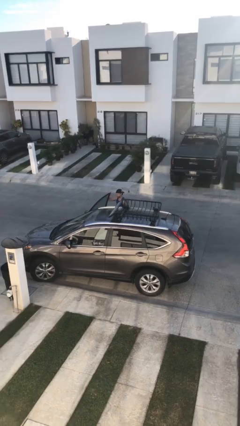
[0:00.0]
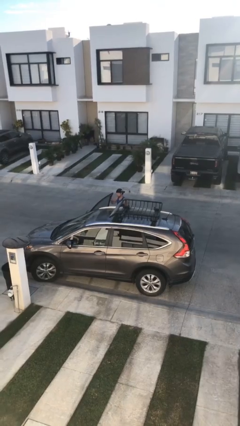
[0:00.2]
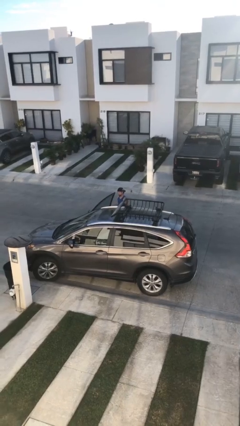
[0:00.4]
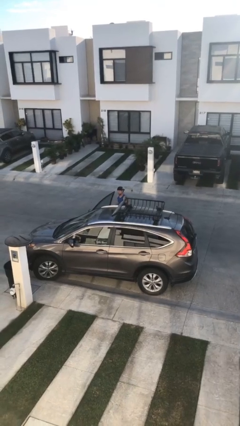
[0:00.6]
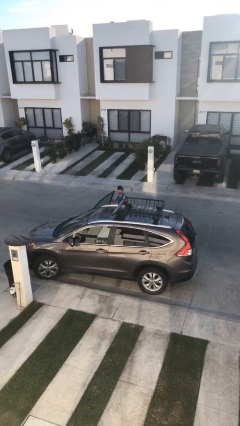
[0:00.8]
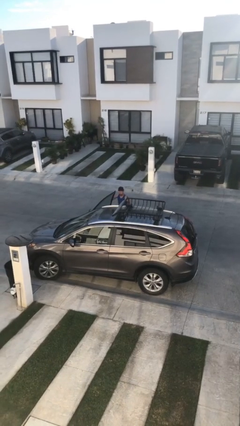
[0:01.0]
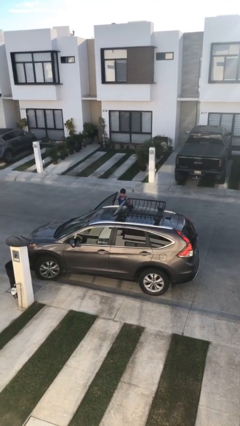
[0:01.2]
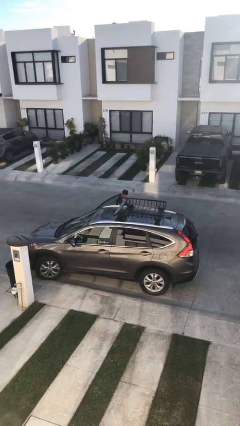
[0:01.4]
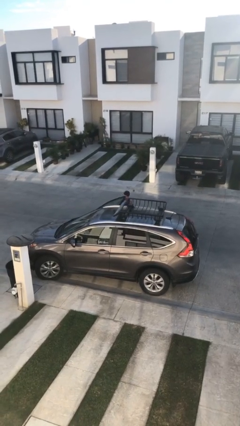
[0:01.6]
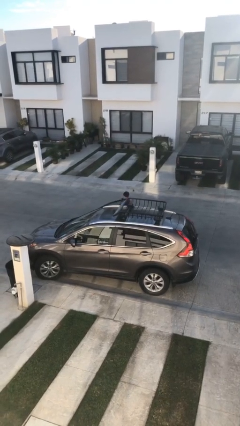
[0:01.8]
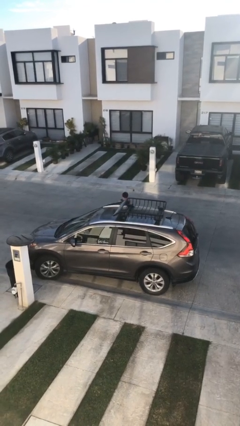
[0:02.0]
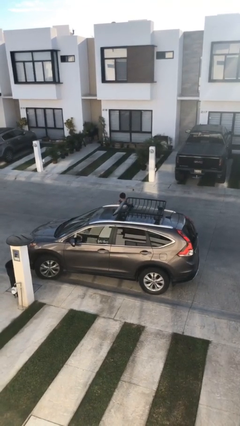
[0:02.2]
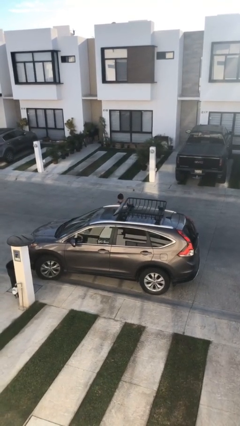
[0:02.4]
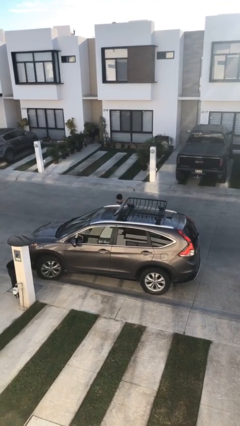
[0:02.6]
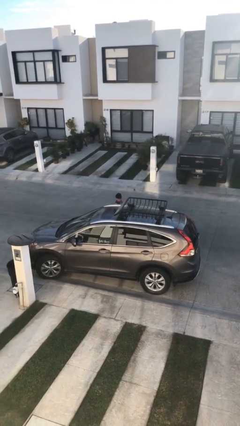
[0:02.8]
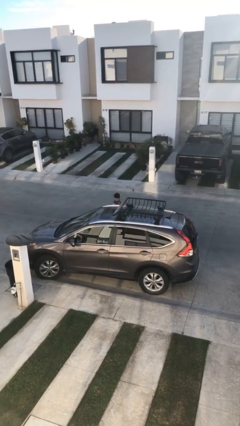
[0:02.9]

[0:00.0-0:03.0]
person closes car door

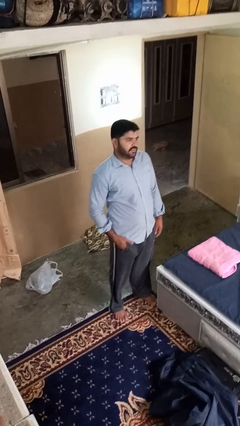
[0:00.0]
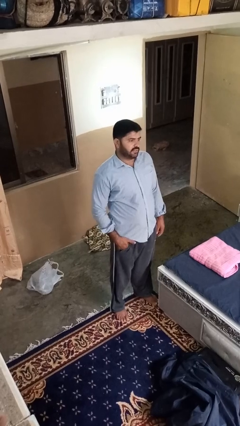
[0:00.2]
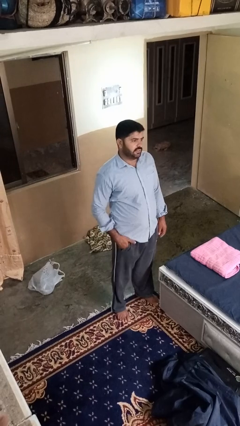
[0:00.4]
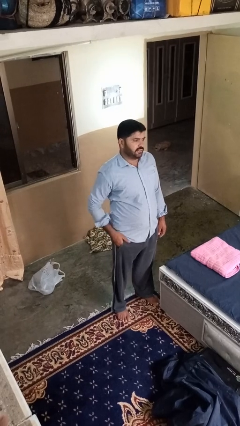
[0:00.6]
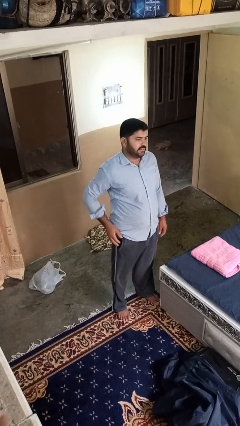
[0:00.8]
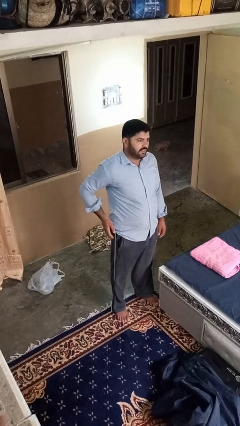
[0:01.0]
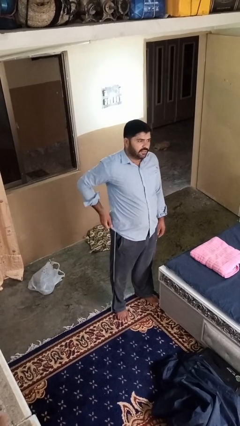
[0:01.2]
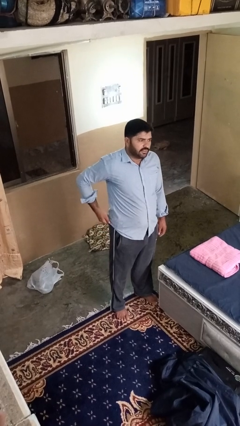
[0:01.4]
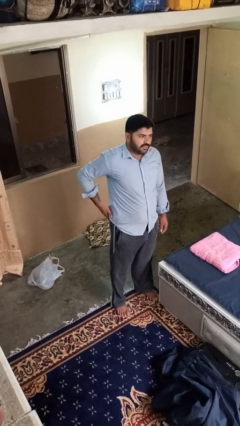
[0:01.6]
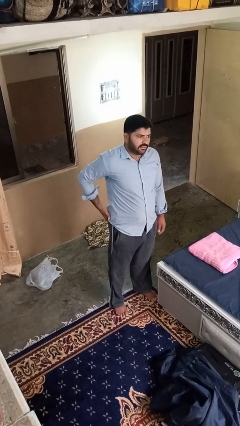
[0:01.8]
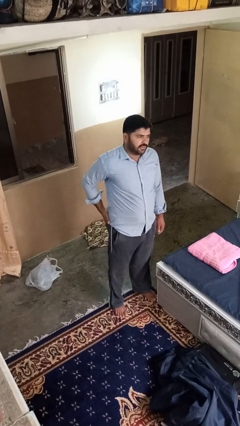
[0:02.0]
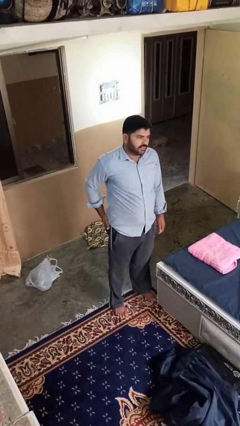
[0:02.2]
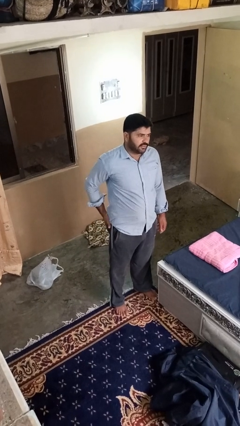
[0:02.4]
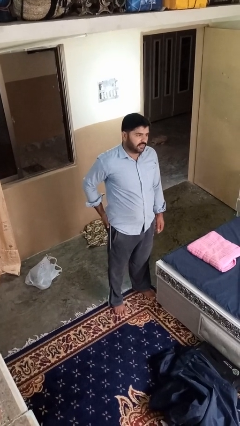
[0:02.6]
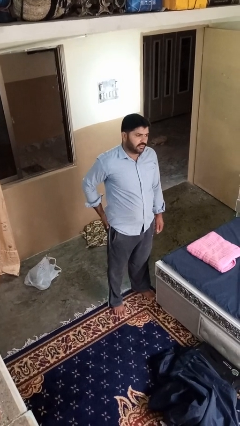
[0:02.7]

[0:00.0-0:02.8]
person puts hands in back pockets

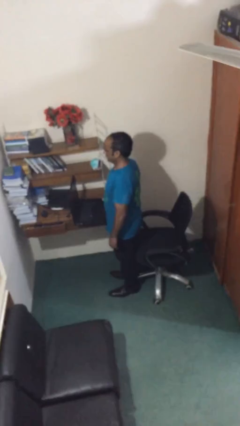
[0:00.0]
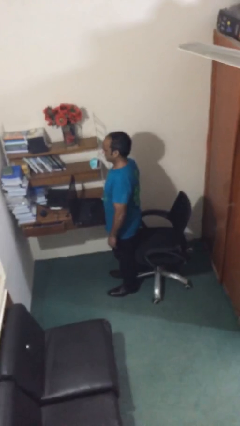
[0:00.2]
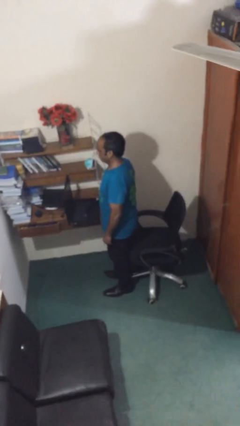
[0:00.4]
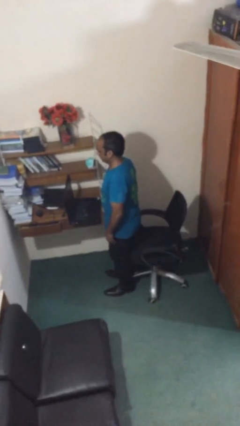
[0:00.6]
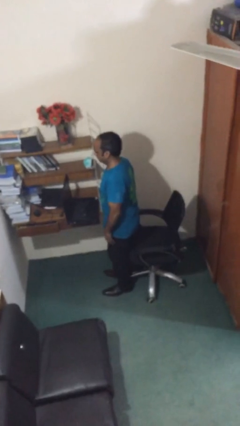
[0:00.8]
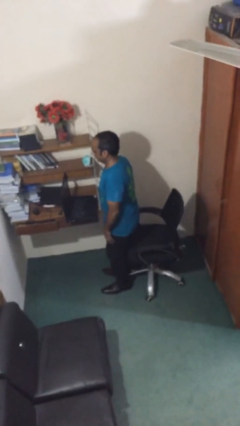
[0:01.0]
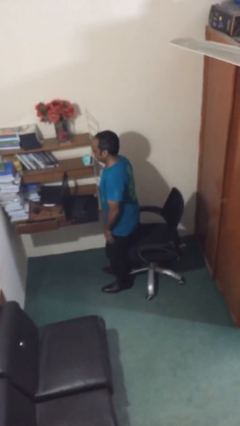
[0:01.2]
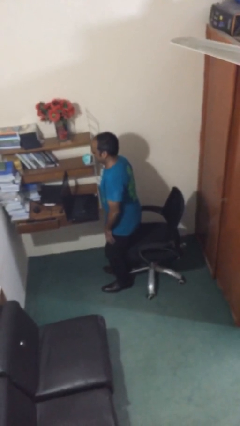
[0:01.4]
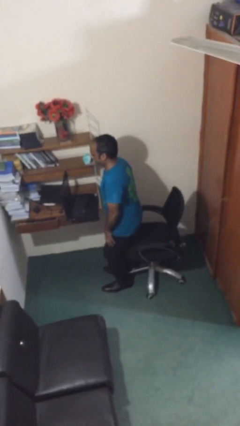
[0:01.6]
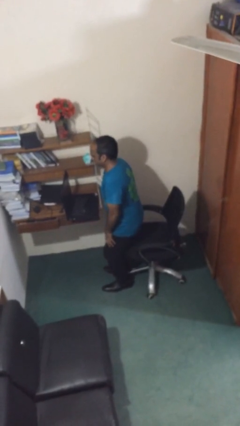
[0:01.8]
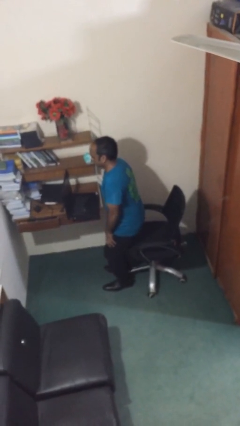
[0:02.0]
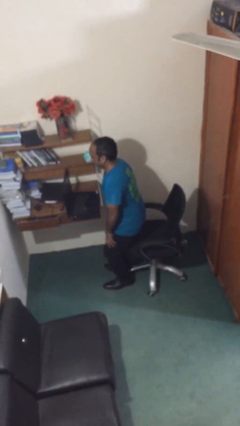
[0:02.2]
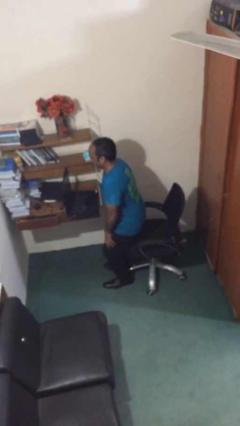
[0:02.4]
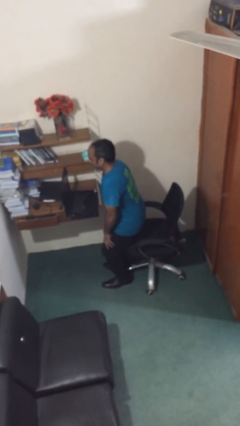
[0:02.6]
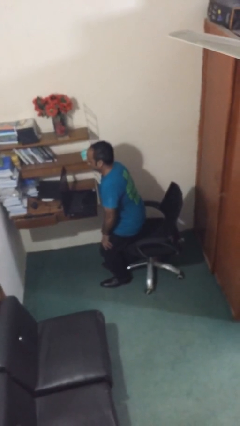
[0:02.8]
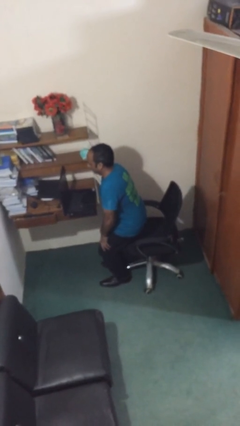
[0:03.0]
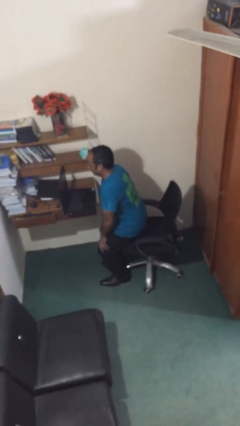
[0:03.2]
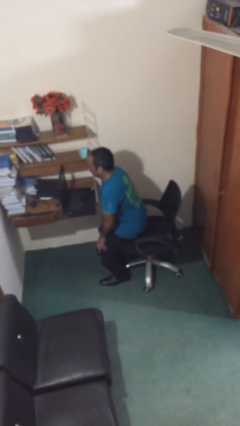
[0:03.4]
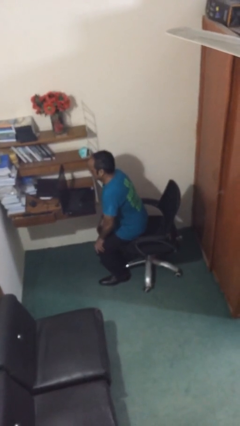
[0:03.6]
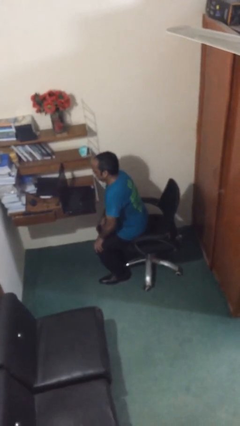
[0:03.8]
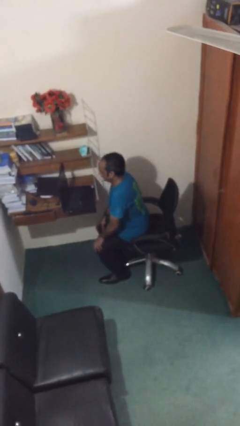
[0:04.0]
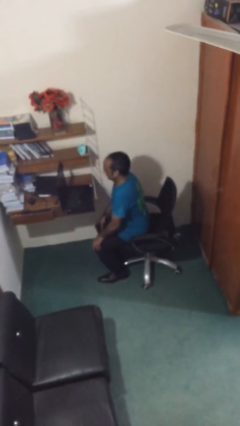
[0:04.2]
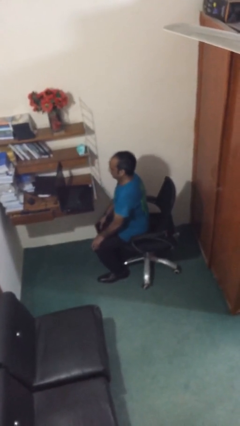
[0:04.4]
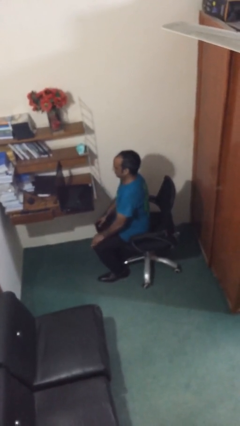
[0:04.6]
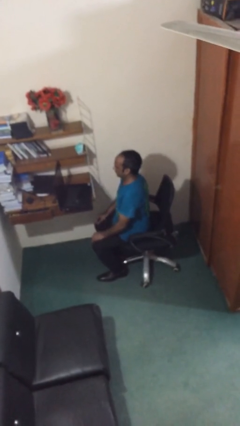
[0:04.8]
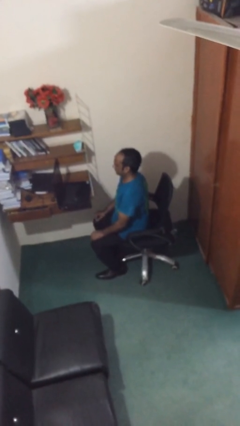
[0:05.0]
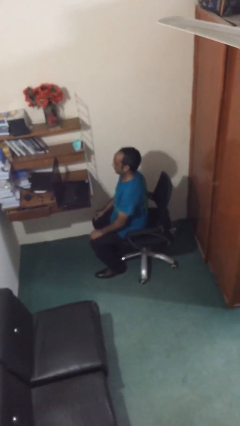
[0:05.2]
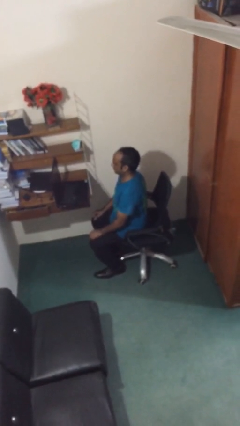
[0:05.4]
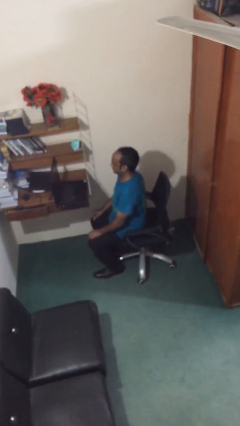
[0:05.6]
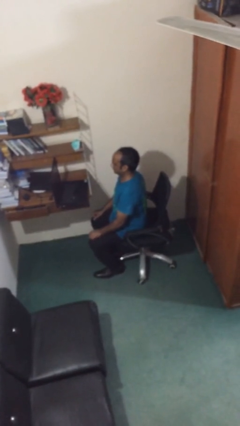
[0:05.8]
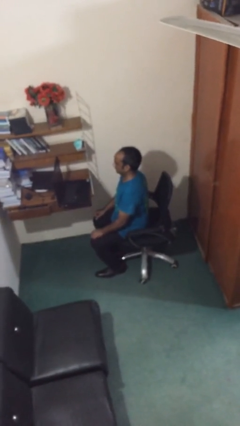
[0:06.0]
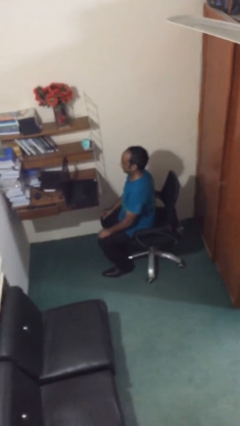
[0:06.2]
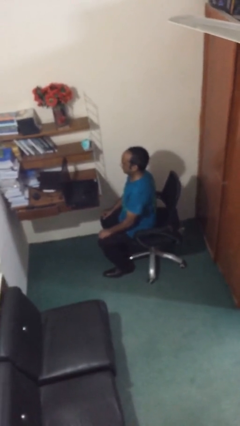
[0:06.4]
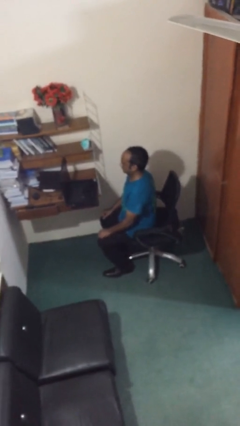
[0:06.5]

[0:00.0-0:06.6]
person sits down

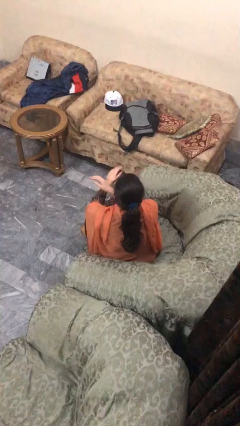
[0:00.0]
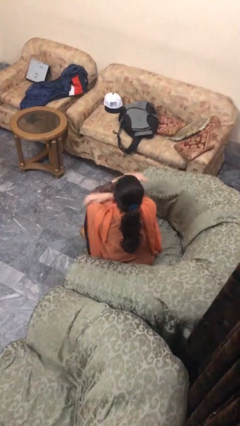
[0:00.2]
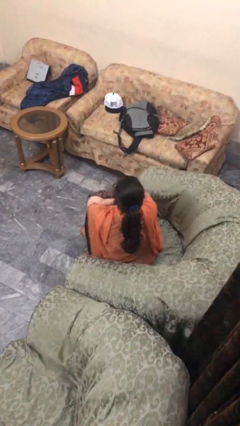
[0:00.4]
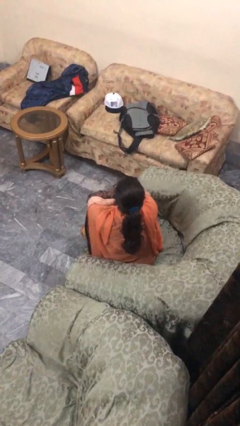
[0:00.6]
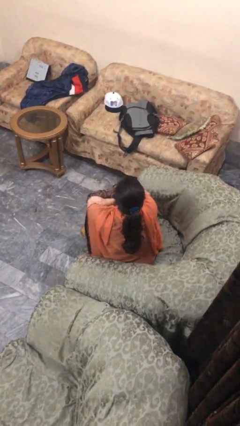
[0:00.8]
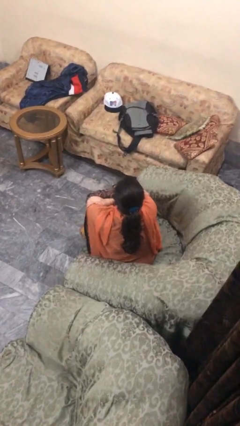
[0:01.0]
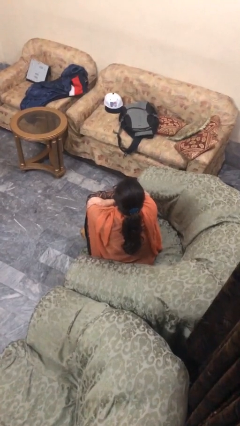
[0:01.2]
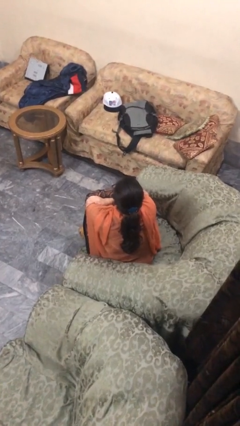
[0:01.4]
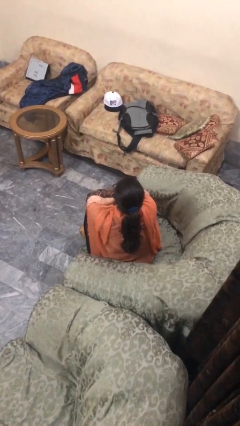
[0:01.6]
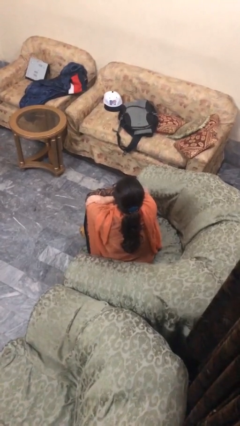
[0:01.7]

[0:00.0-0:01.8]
person crosses arms

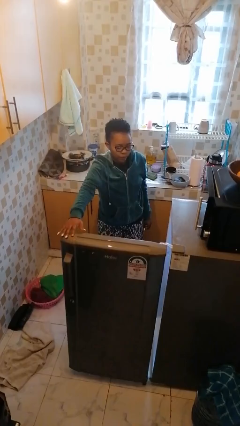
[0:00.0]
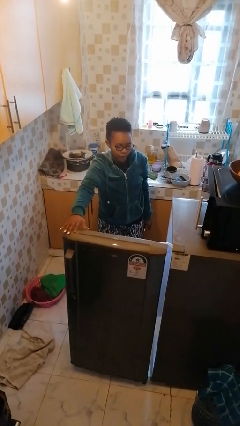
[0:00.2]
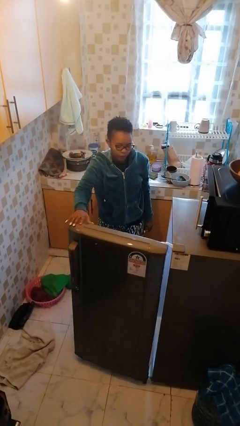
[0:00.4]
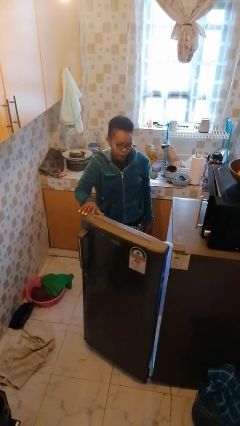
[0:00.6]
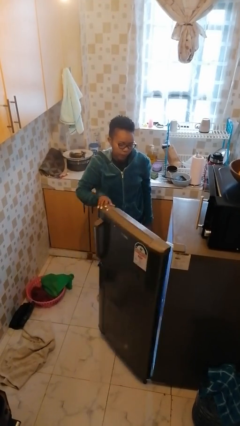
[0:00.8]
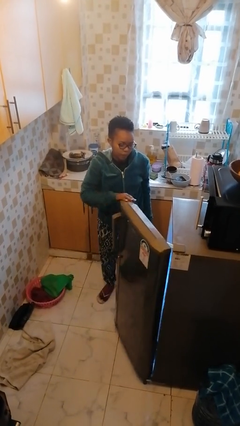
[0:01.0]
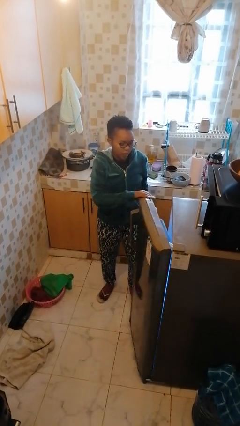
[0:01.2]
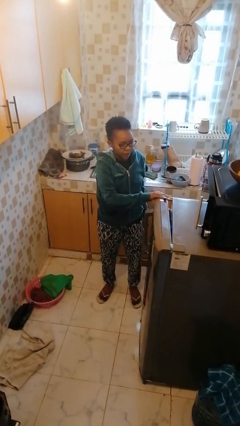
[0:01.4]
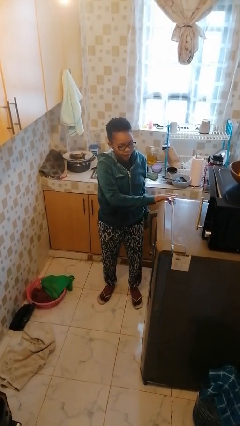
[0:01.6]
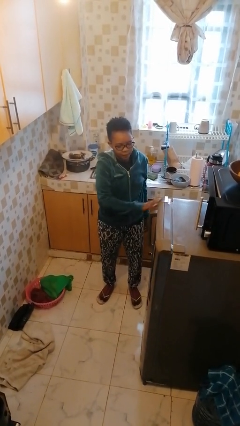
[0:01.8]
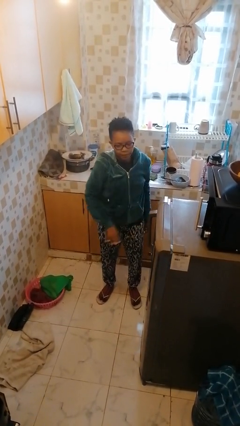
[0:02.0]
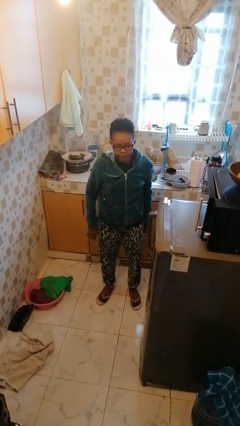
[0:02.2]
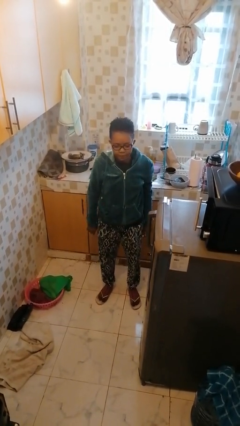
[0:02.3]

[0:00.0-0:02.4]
person closes refrigerator

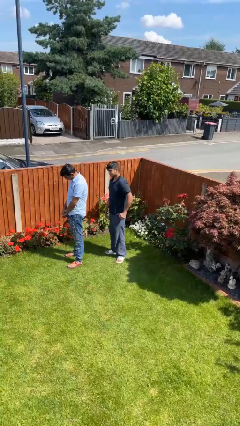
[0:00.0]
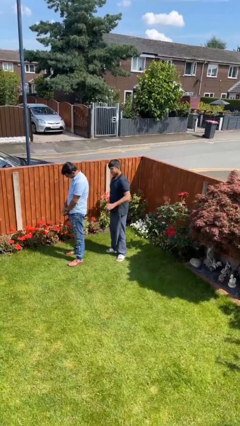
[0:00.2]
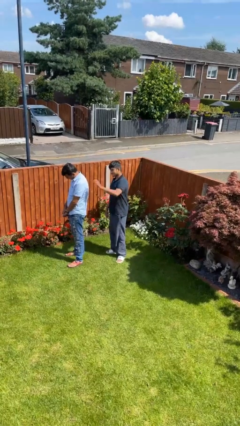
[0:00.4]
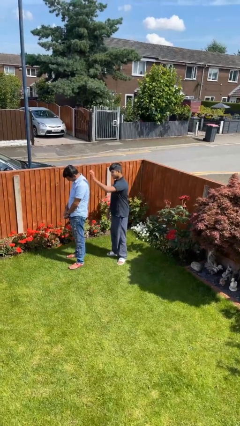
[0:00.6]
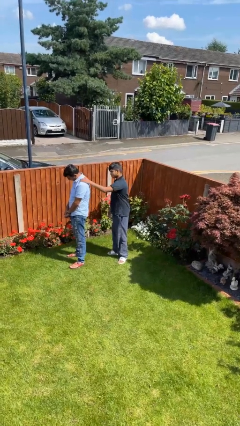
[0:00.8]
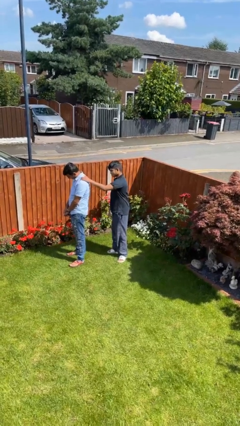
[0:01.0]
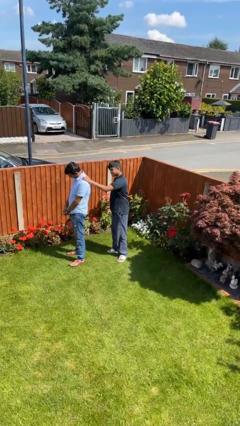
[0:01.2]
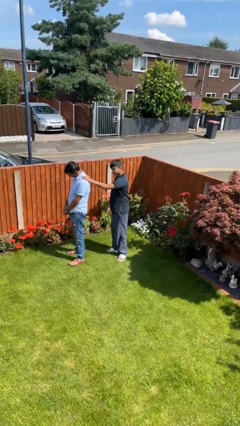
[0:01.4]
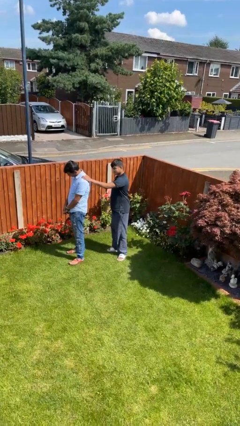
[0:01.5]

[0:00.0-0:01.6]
person touches back of person
